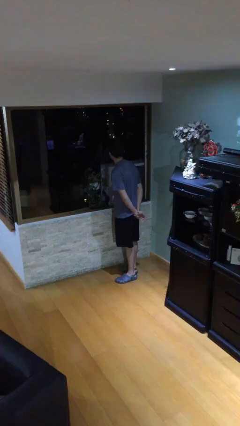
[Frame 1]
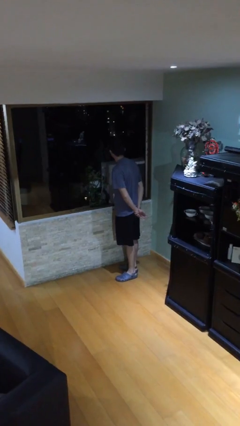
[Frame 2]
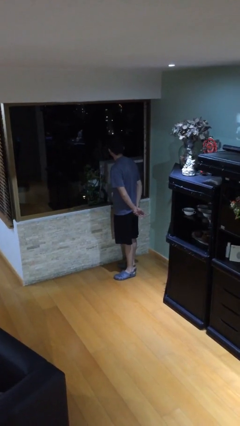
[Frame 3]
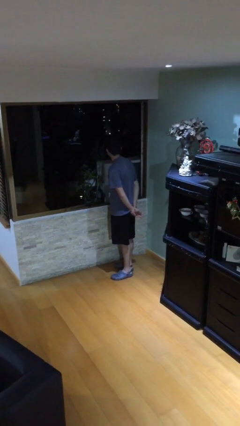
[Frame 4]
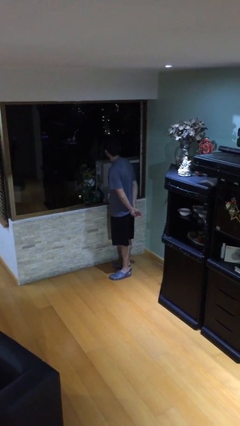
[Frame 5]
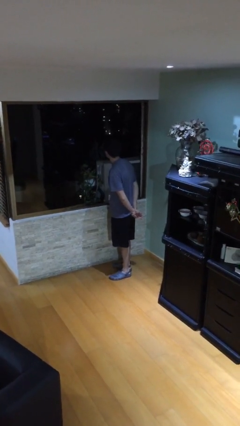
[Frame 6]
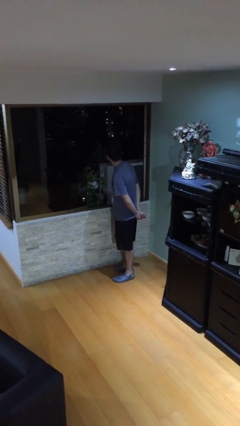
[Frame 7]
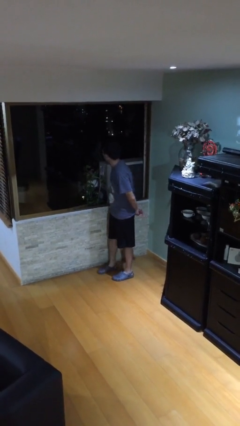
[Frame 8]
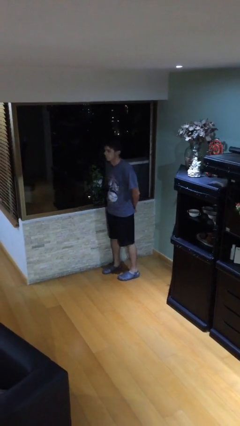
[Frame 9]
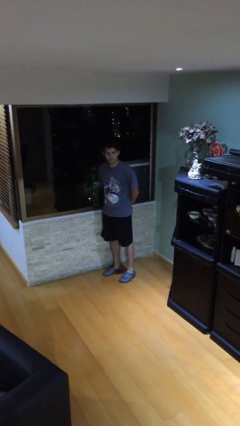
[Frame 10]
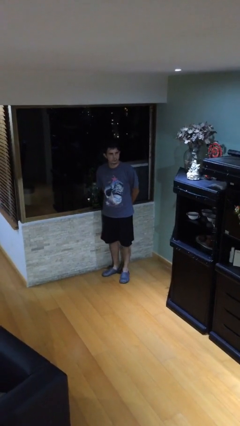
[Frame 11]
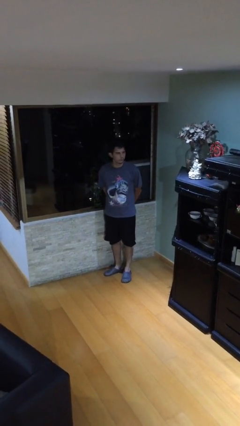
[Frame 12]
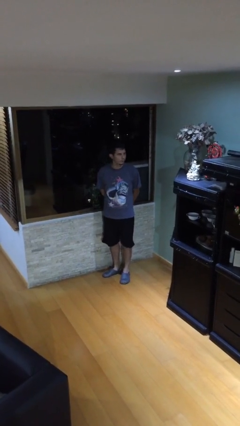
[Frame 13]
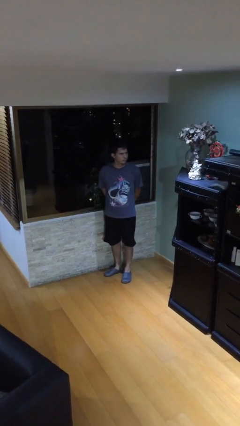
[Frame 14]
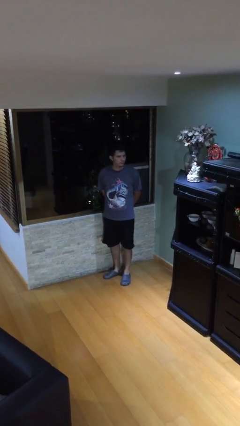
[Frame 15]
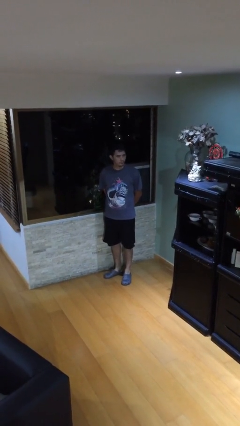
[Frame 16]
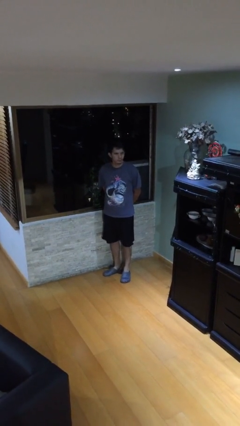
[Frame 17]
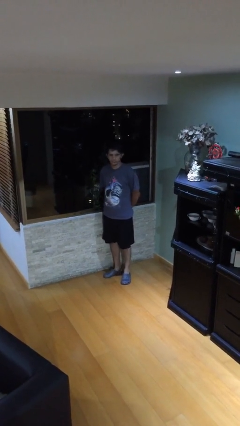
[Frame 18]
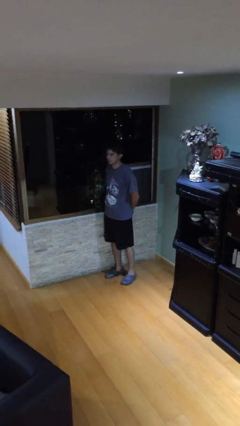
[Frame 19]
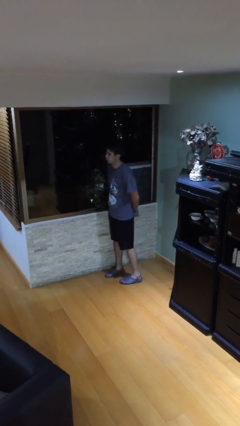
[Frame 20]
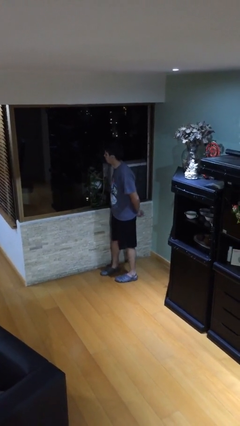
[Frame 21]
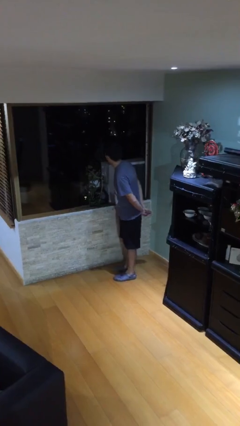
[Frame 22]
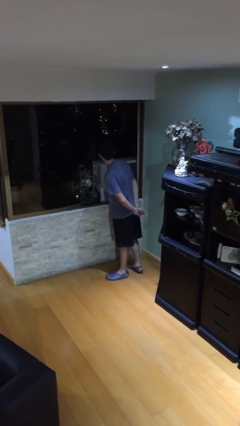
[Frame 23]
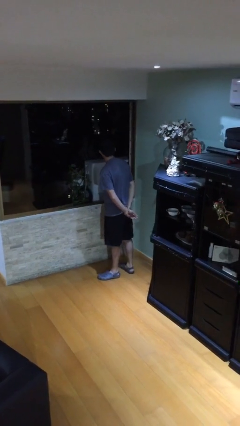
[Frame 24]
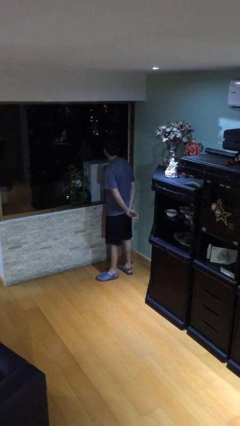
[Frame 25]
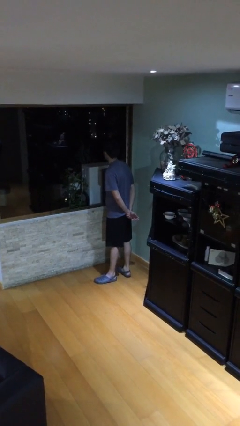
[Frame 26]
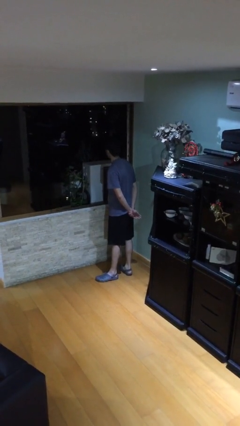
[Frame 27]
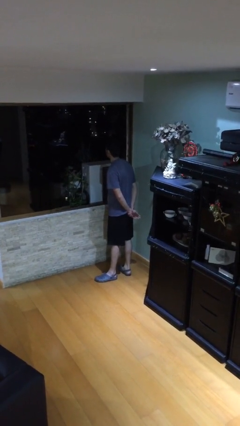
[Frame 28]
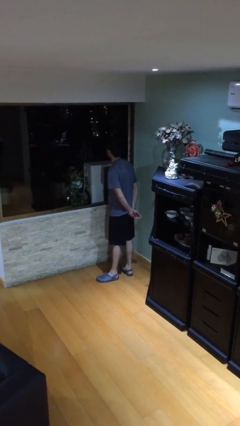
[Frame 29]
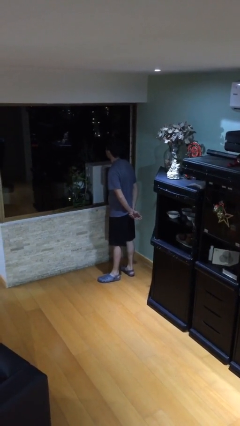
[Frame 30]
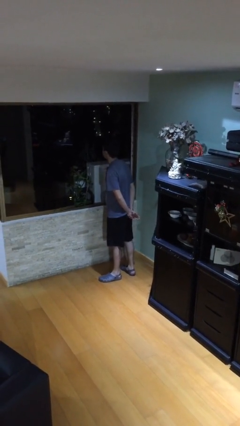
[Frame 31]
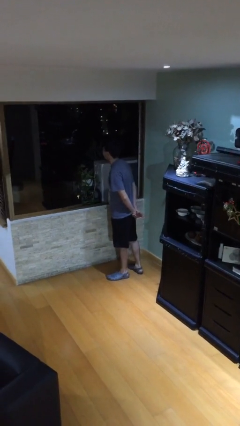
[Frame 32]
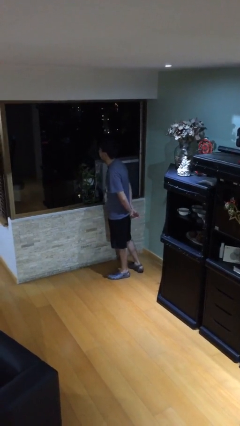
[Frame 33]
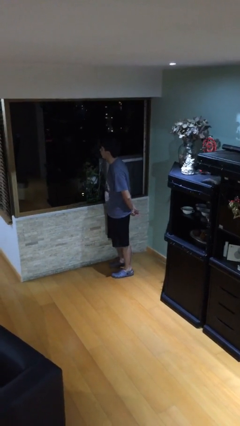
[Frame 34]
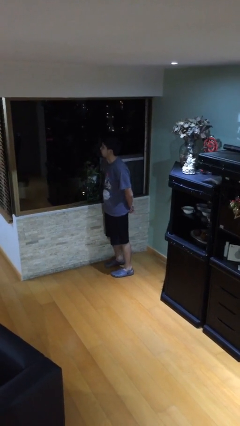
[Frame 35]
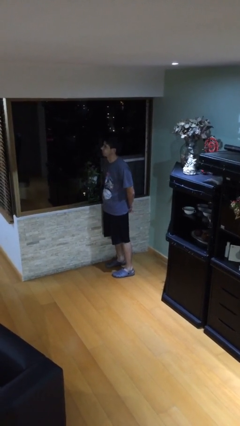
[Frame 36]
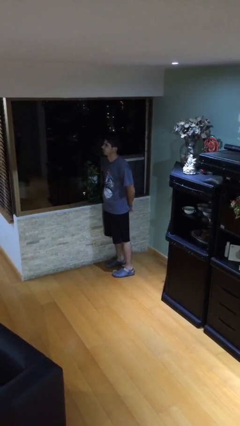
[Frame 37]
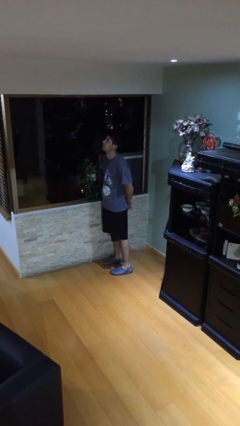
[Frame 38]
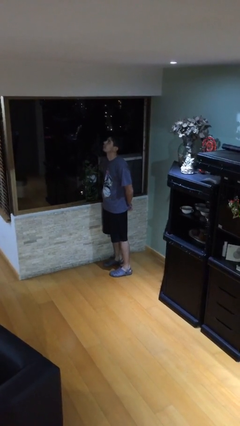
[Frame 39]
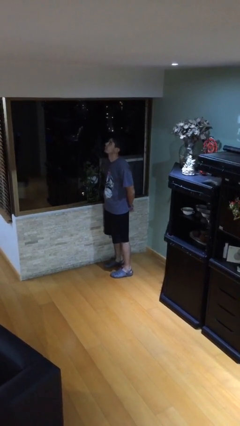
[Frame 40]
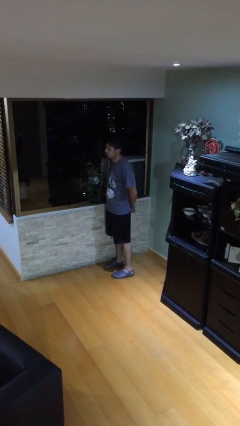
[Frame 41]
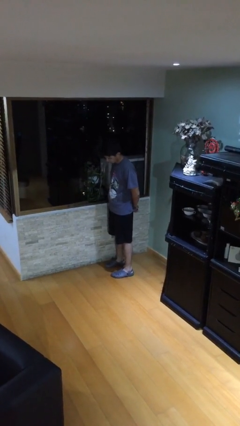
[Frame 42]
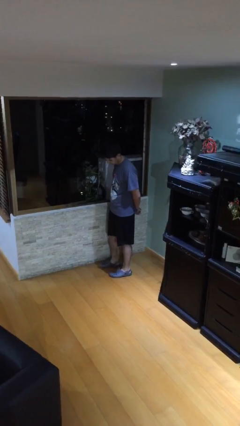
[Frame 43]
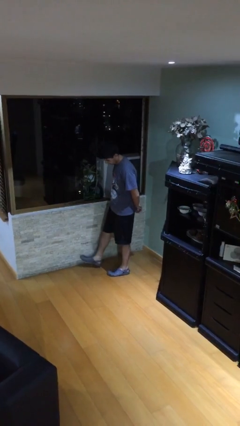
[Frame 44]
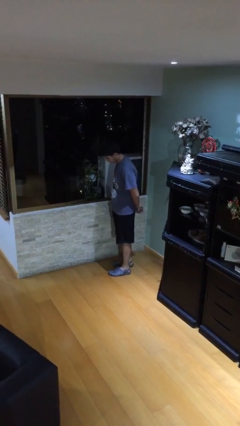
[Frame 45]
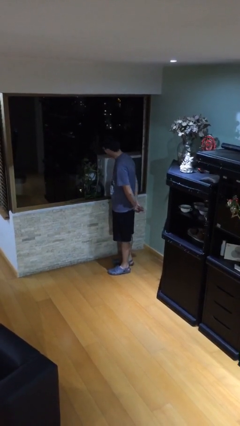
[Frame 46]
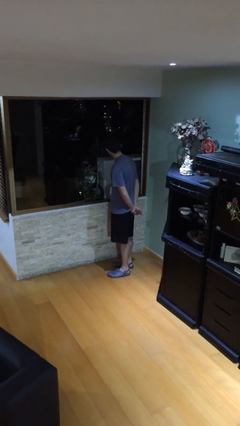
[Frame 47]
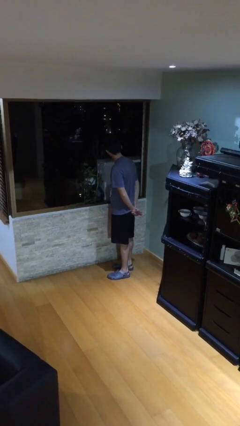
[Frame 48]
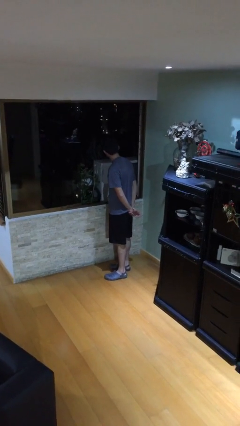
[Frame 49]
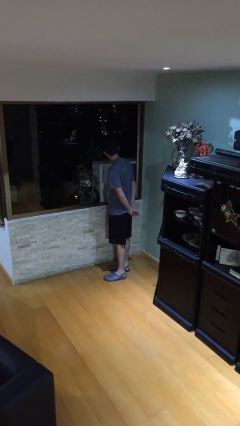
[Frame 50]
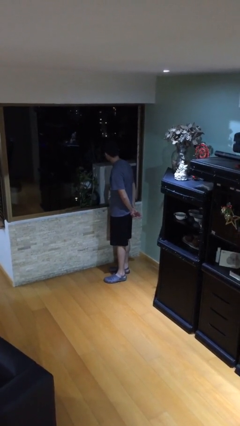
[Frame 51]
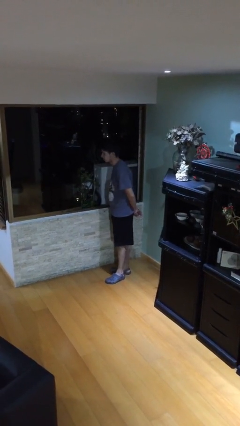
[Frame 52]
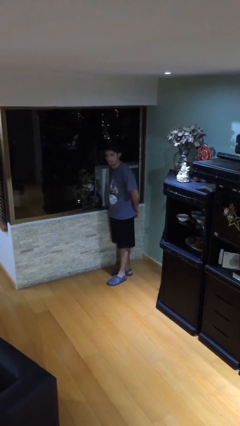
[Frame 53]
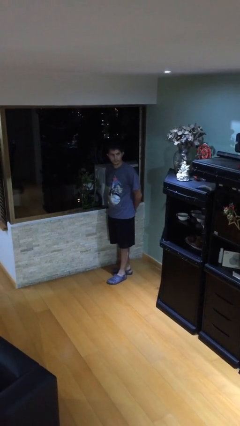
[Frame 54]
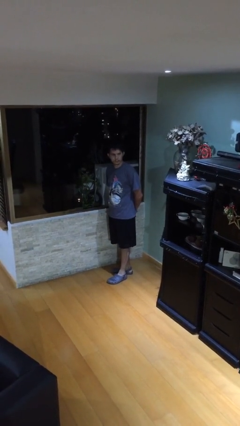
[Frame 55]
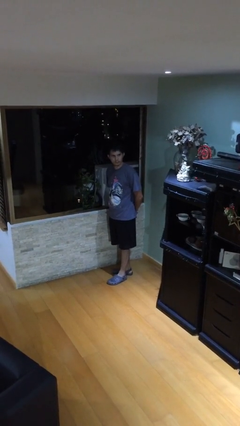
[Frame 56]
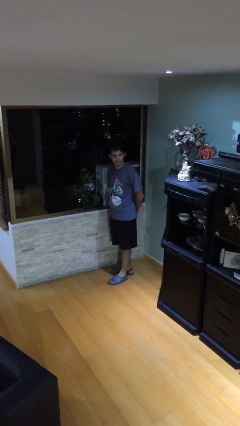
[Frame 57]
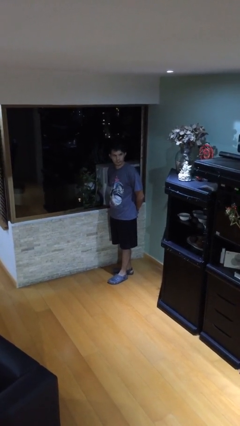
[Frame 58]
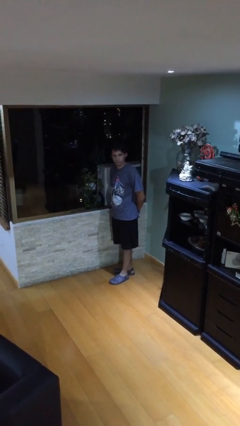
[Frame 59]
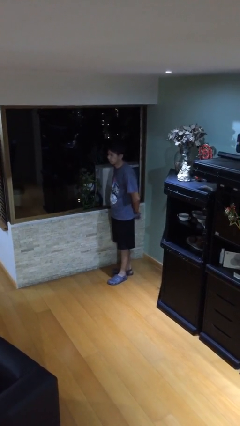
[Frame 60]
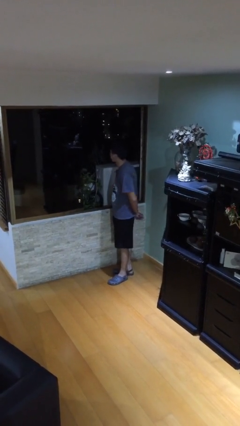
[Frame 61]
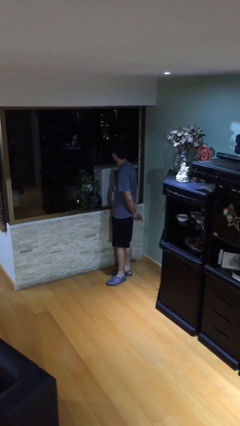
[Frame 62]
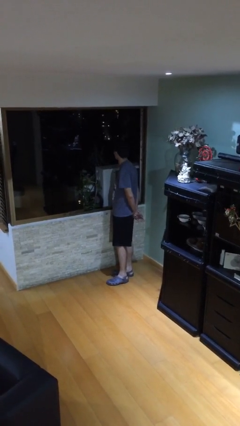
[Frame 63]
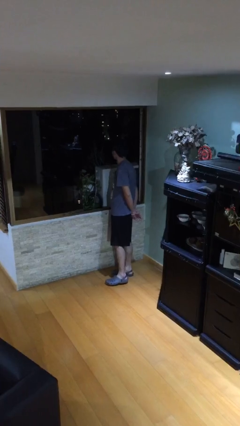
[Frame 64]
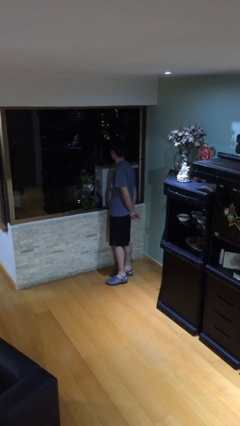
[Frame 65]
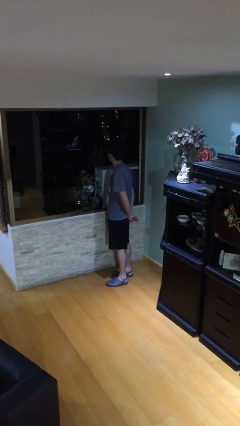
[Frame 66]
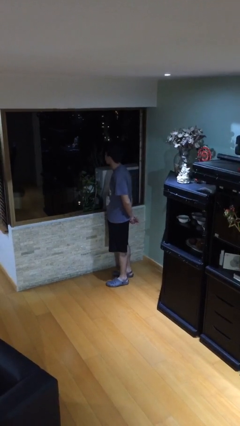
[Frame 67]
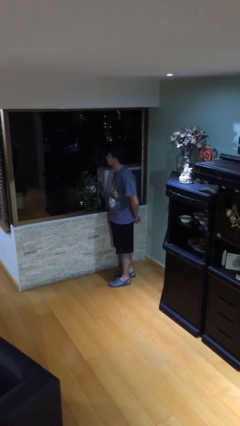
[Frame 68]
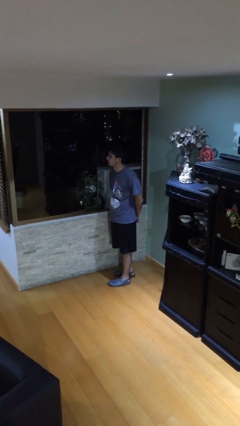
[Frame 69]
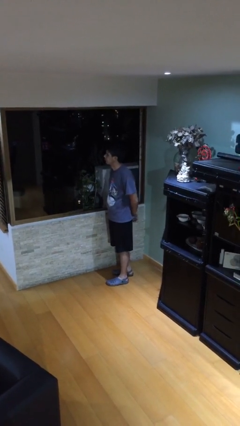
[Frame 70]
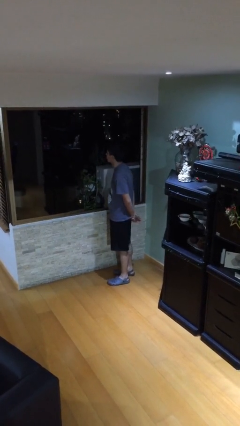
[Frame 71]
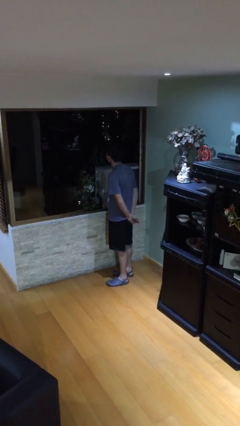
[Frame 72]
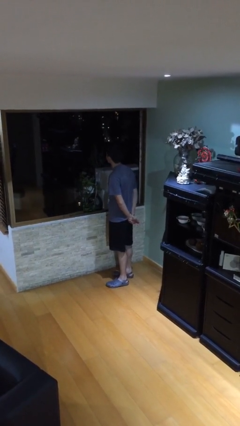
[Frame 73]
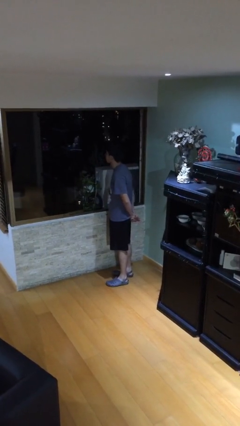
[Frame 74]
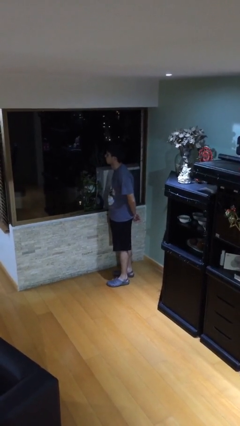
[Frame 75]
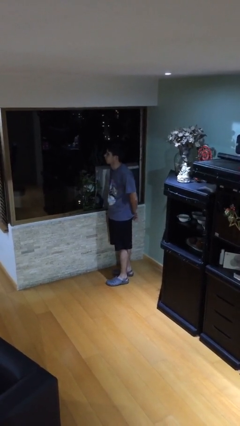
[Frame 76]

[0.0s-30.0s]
person walks

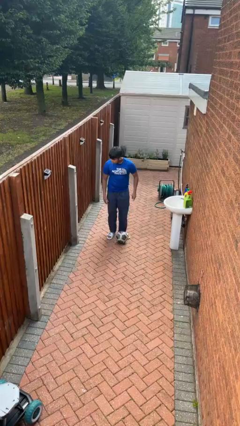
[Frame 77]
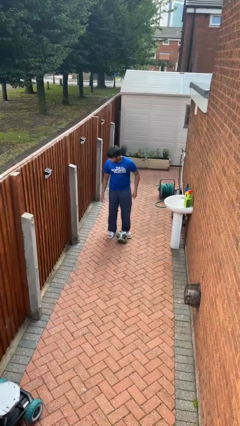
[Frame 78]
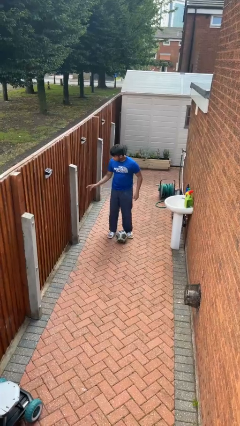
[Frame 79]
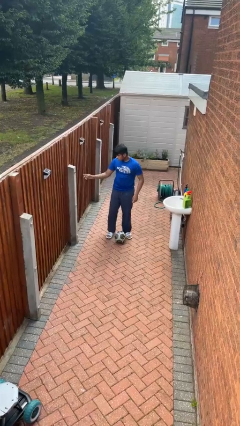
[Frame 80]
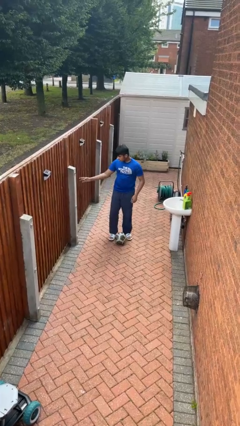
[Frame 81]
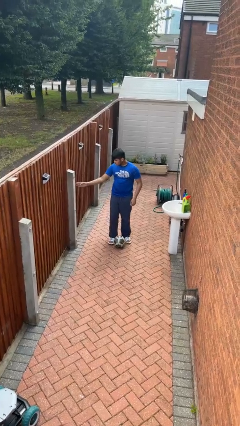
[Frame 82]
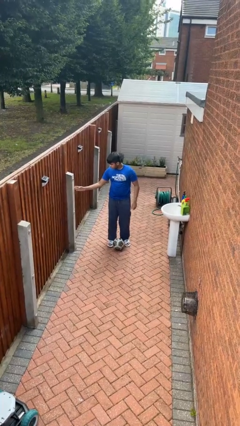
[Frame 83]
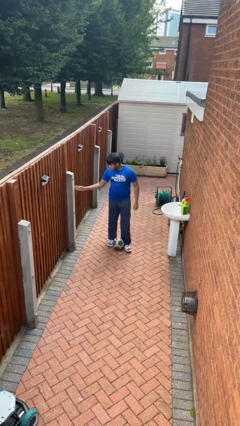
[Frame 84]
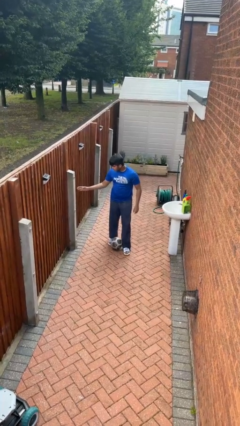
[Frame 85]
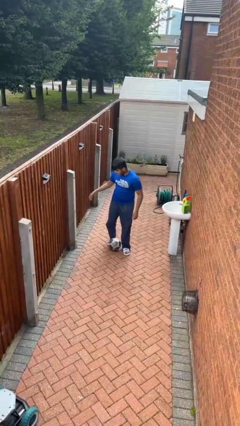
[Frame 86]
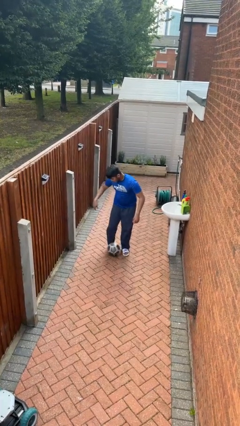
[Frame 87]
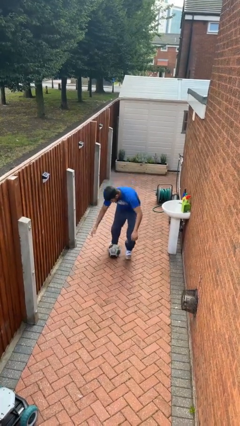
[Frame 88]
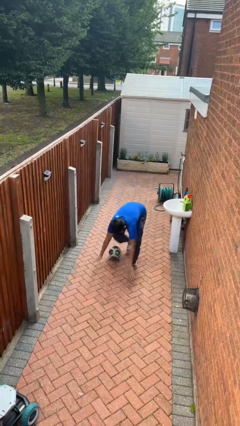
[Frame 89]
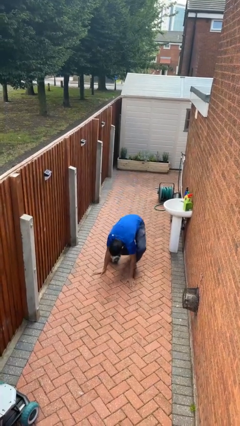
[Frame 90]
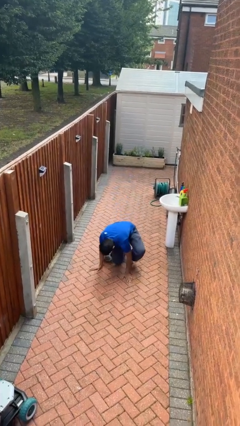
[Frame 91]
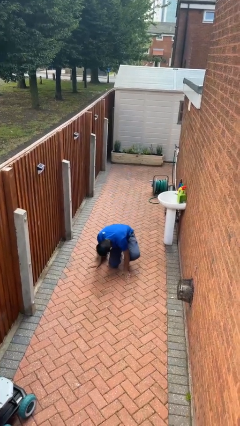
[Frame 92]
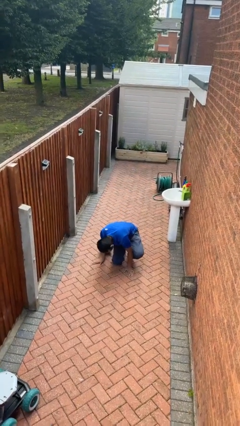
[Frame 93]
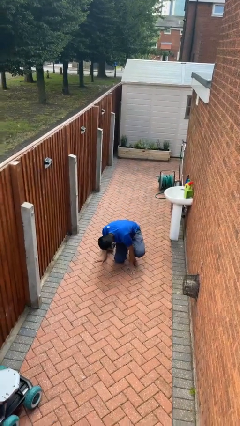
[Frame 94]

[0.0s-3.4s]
person trips on object on floor
